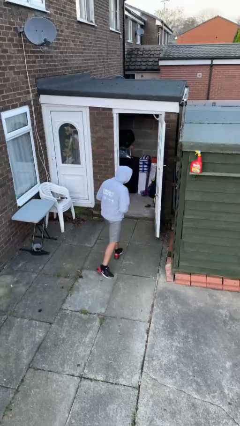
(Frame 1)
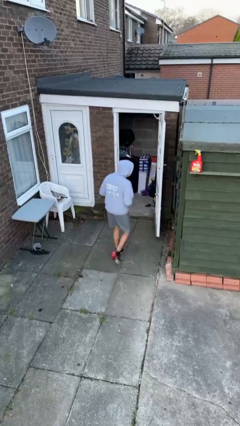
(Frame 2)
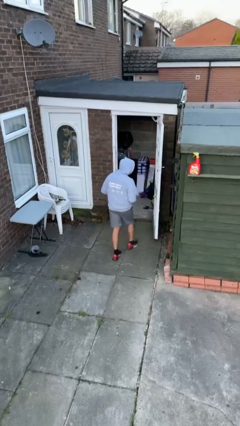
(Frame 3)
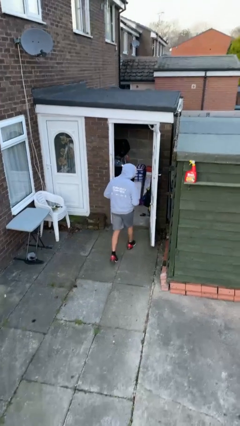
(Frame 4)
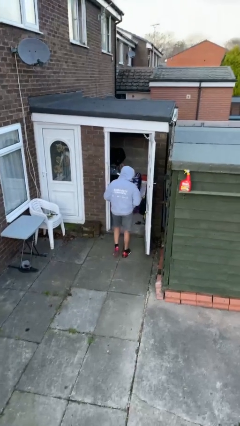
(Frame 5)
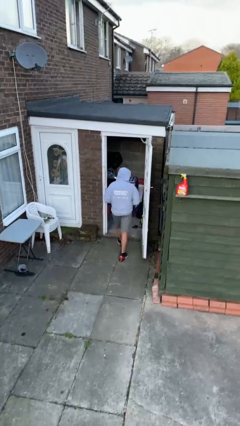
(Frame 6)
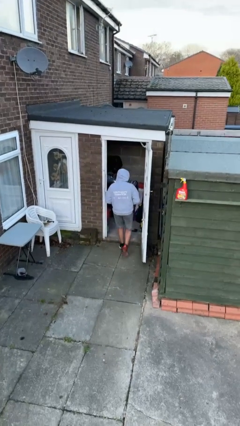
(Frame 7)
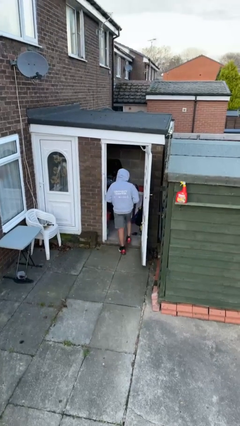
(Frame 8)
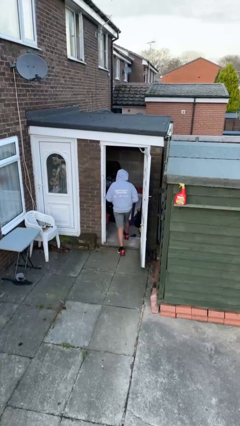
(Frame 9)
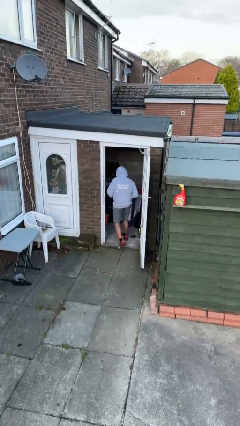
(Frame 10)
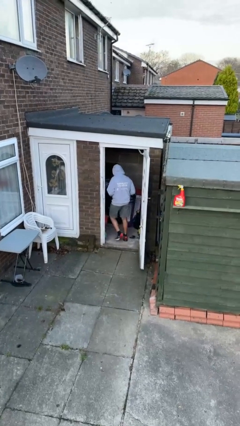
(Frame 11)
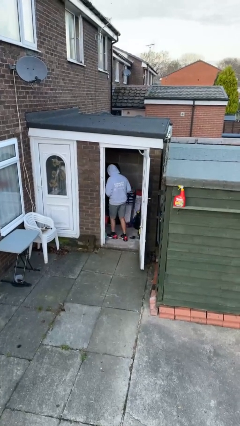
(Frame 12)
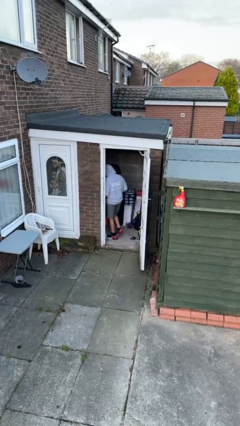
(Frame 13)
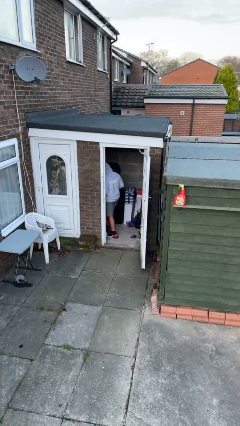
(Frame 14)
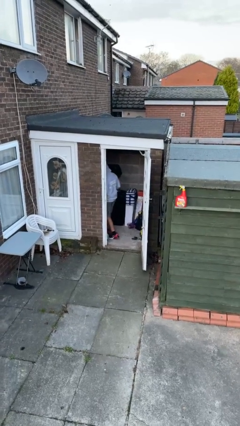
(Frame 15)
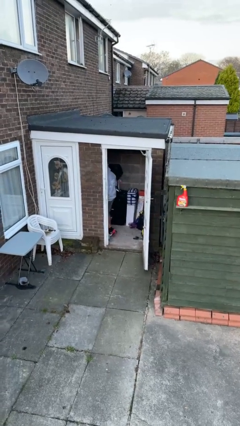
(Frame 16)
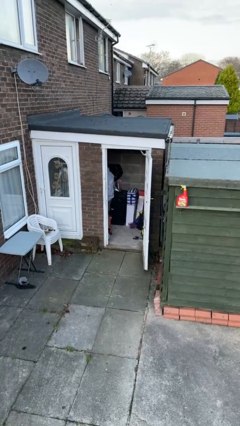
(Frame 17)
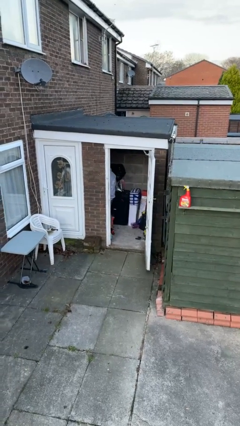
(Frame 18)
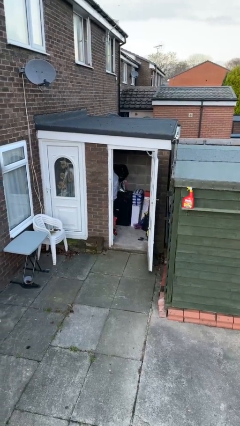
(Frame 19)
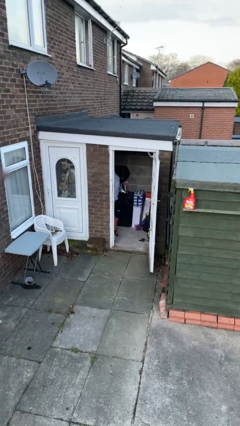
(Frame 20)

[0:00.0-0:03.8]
person exits scene through structure

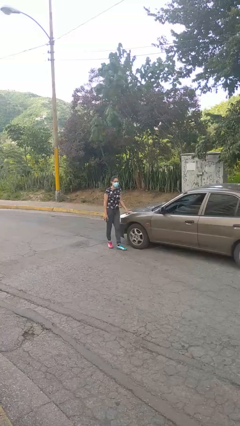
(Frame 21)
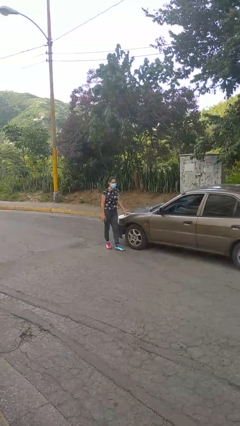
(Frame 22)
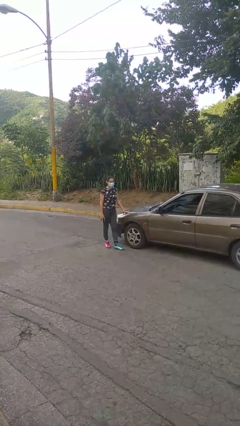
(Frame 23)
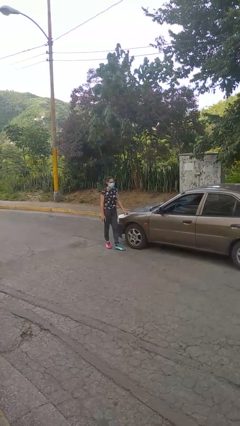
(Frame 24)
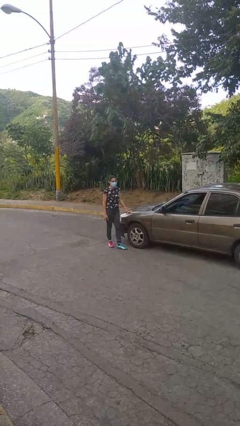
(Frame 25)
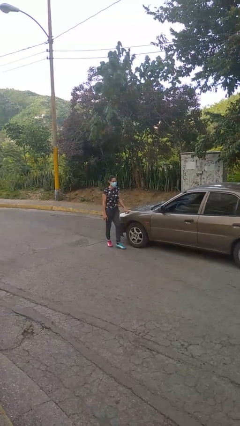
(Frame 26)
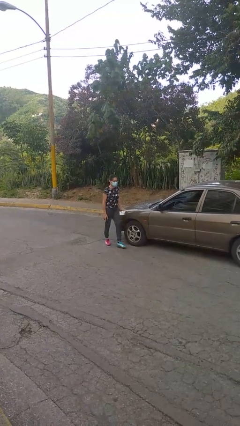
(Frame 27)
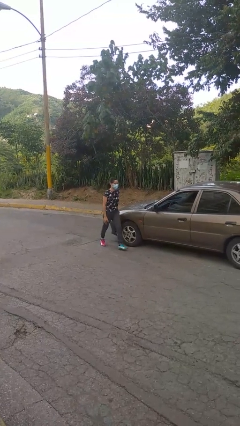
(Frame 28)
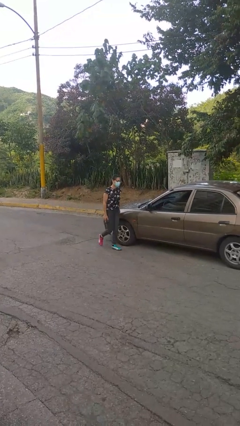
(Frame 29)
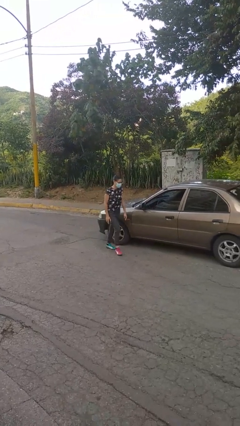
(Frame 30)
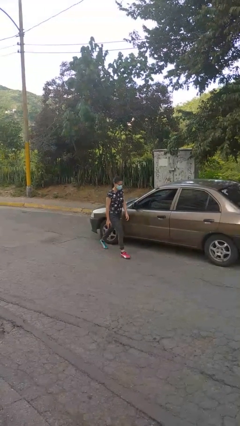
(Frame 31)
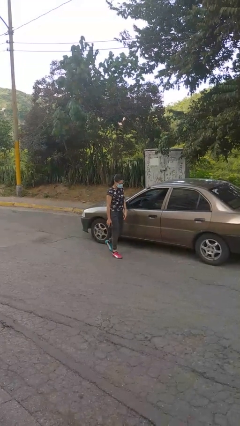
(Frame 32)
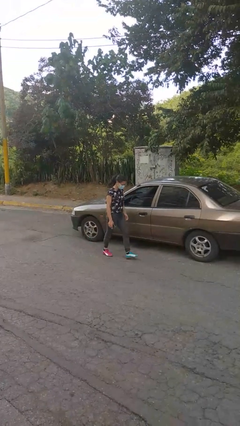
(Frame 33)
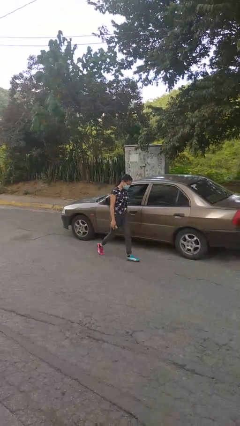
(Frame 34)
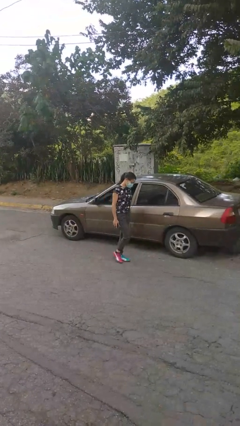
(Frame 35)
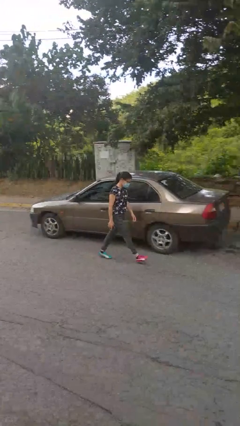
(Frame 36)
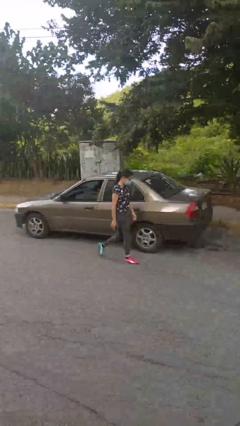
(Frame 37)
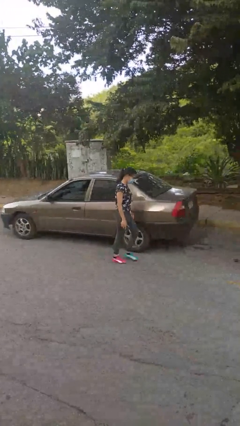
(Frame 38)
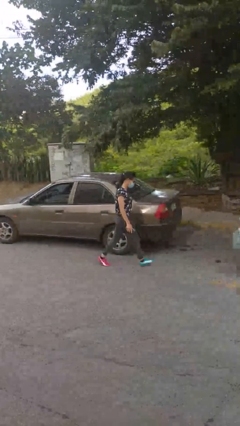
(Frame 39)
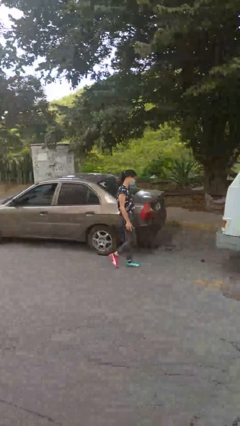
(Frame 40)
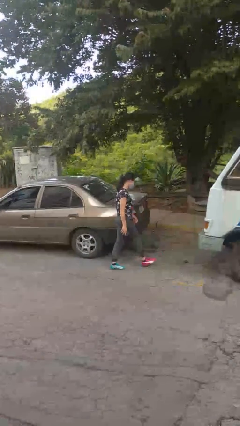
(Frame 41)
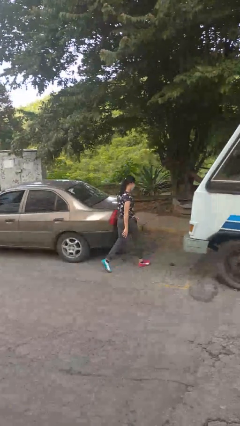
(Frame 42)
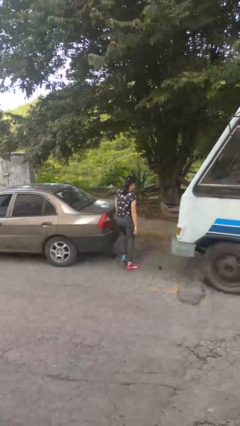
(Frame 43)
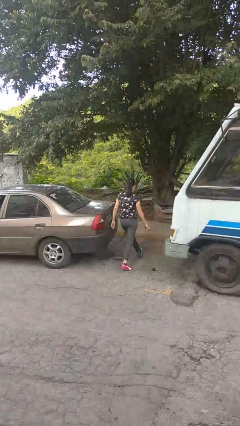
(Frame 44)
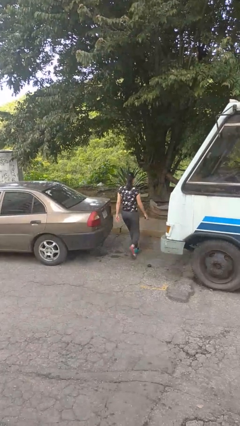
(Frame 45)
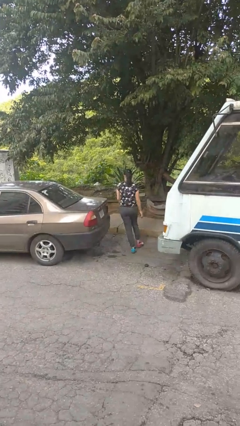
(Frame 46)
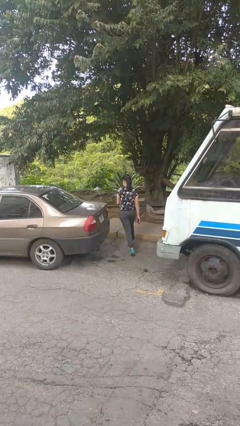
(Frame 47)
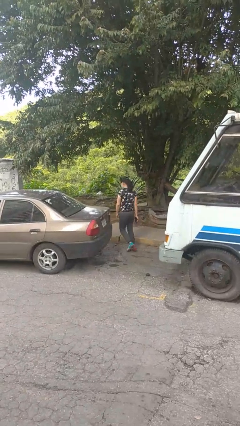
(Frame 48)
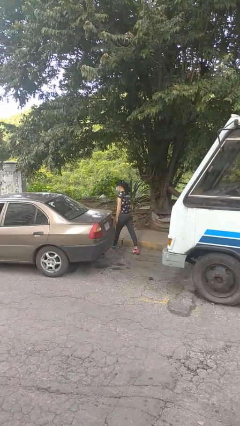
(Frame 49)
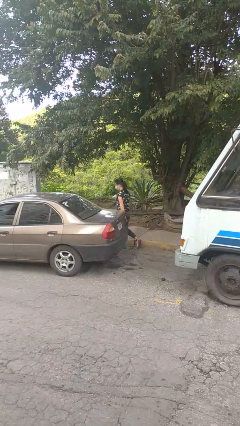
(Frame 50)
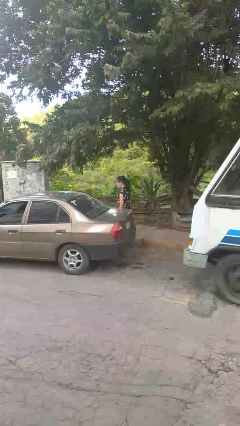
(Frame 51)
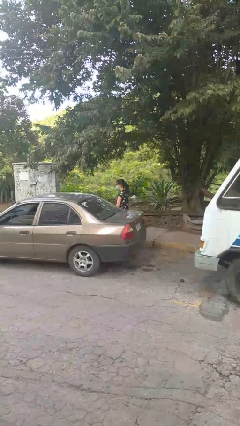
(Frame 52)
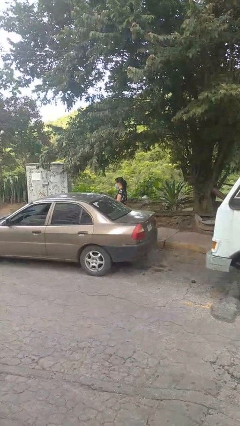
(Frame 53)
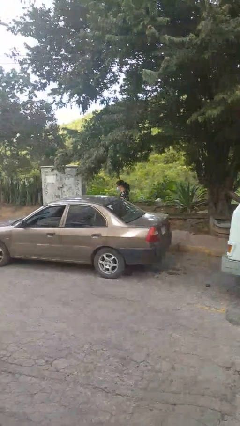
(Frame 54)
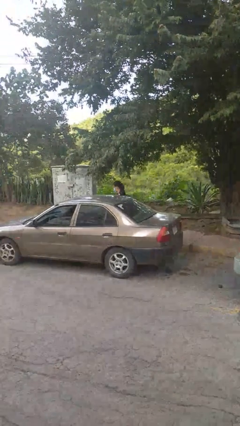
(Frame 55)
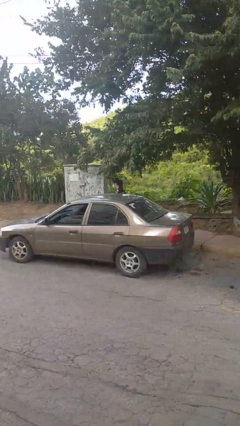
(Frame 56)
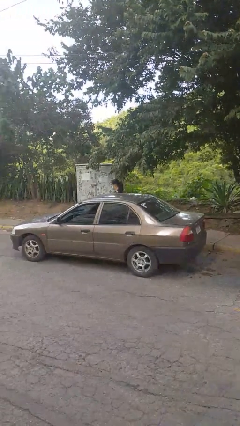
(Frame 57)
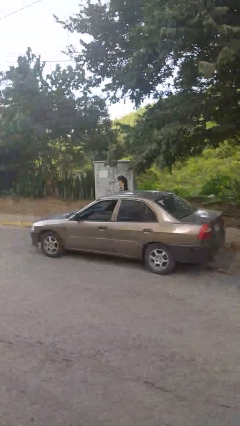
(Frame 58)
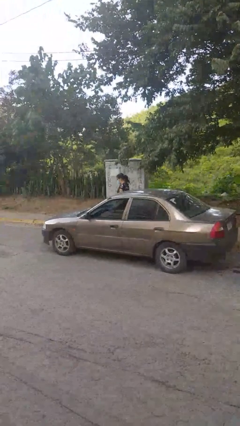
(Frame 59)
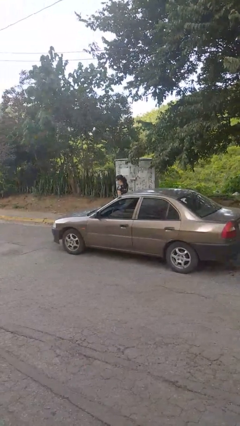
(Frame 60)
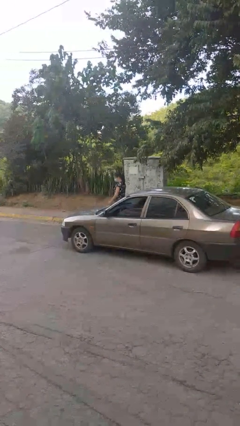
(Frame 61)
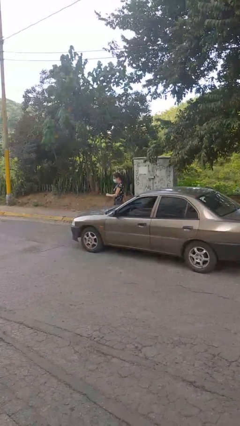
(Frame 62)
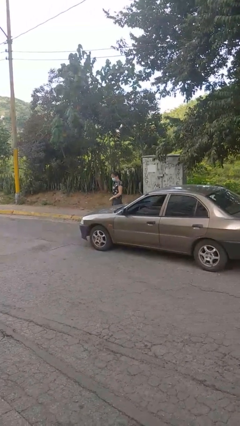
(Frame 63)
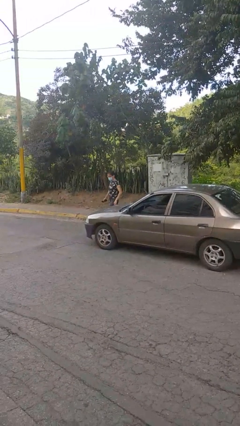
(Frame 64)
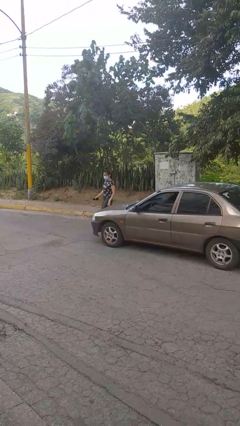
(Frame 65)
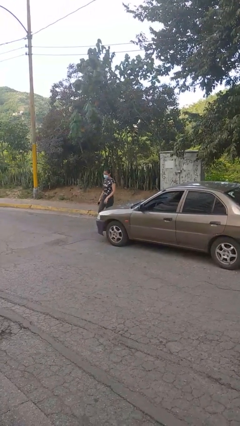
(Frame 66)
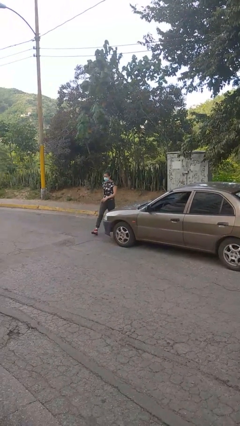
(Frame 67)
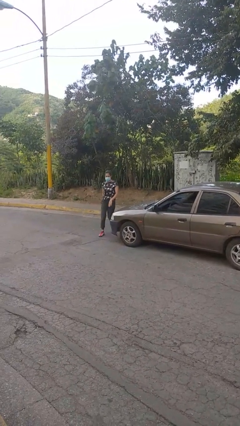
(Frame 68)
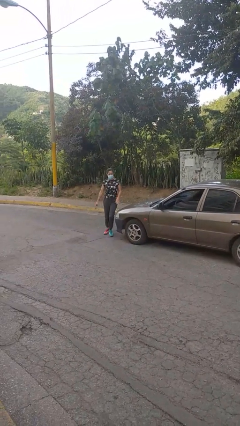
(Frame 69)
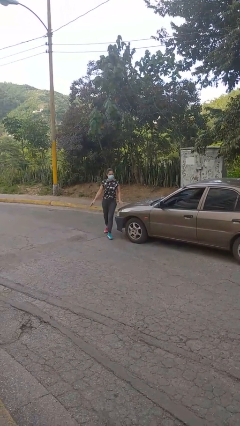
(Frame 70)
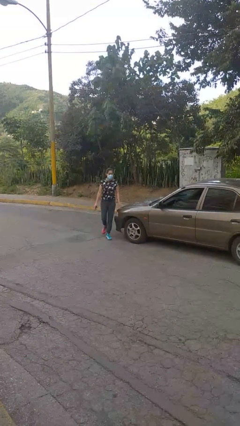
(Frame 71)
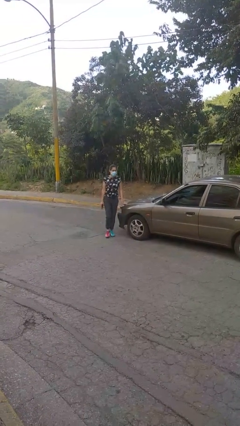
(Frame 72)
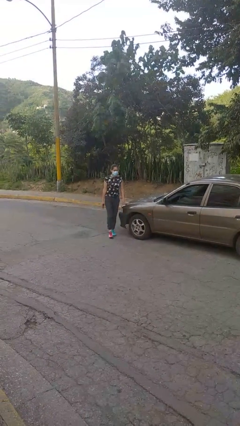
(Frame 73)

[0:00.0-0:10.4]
person walks around car

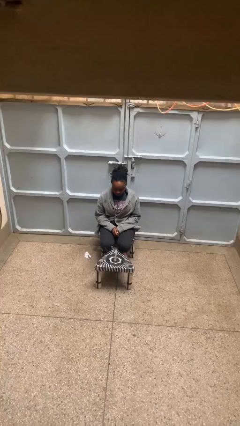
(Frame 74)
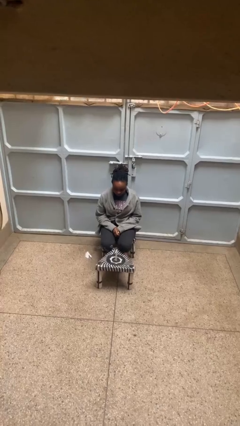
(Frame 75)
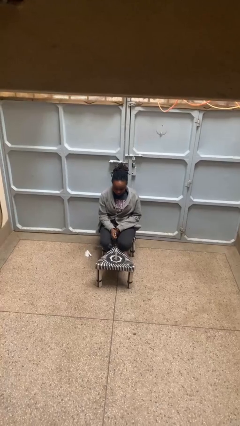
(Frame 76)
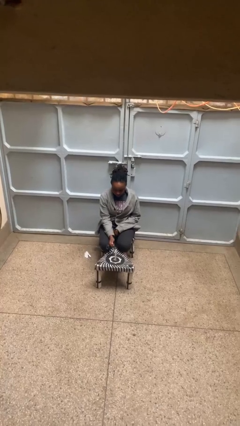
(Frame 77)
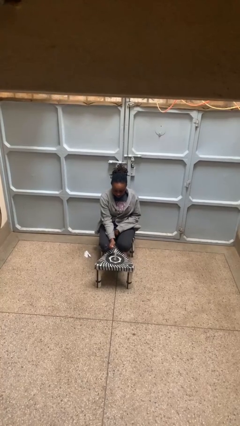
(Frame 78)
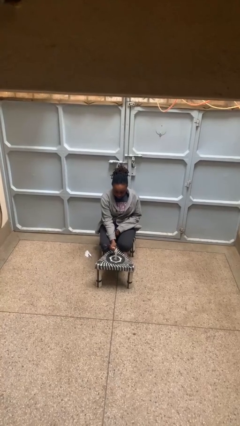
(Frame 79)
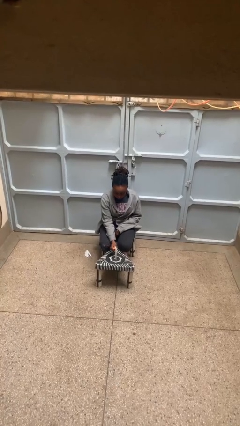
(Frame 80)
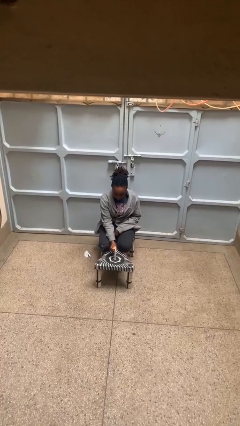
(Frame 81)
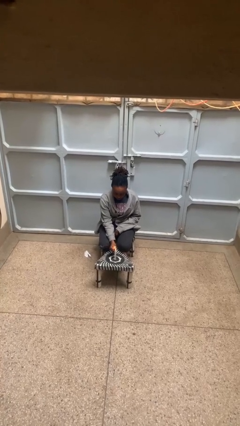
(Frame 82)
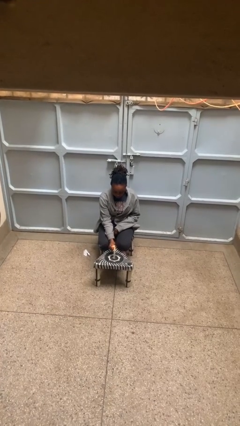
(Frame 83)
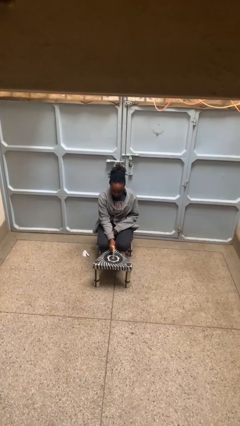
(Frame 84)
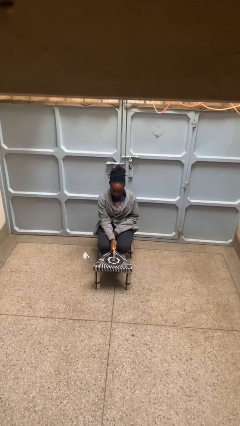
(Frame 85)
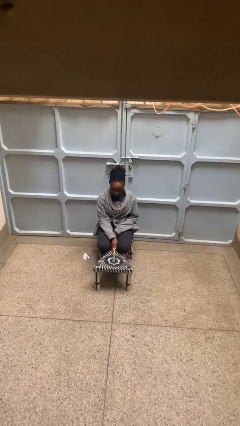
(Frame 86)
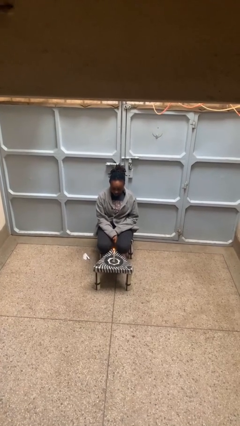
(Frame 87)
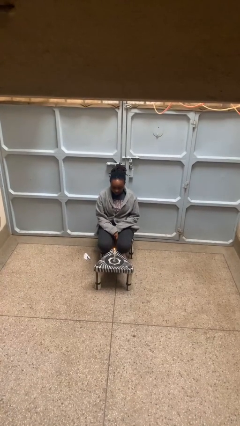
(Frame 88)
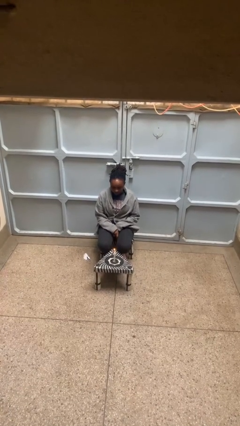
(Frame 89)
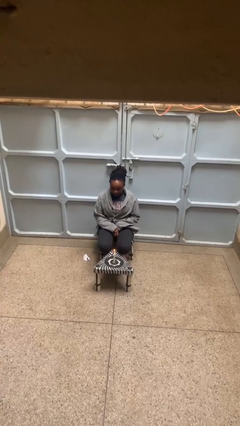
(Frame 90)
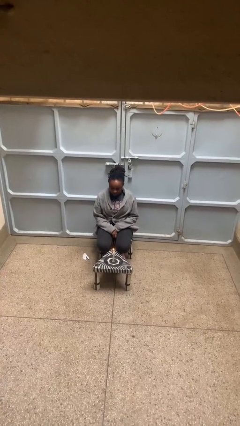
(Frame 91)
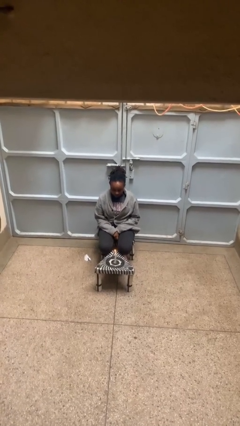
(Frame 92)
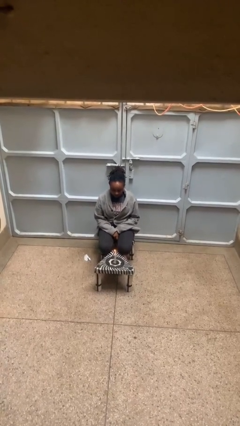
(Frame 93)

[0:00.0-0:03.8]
person lights candle
